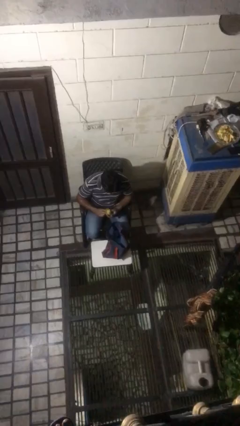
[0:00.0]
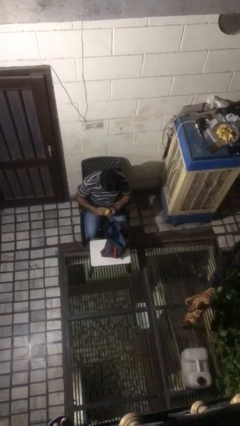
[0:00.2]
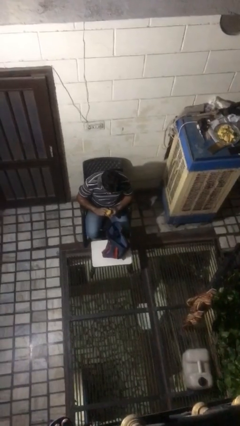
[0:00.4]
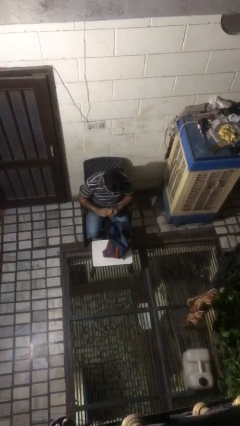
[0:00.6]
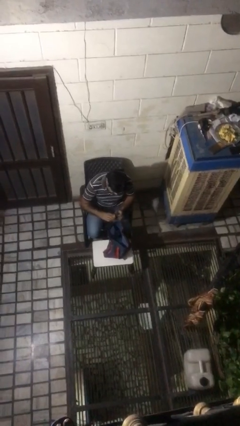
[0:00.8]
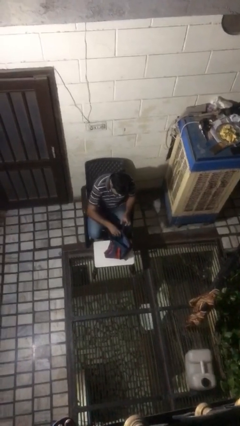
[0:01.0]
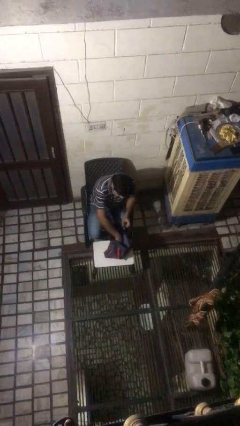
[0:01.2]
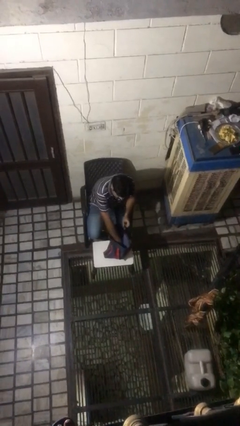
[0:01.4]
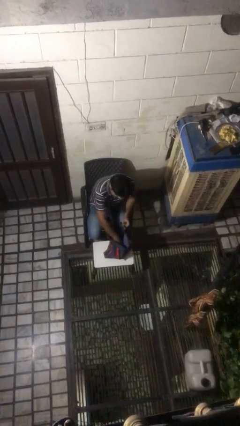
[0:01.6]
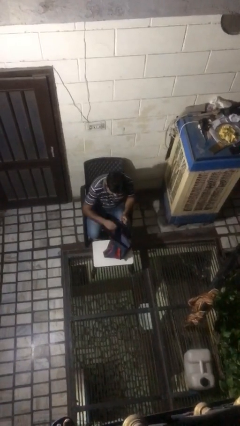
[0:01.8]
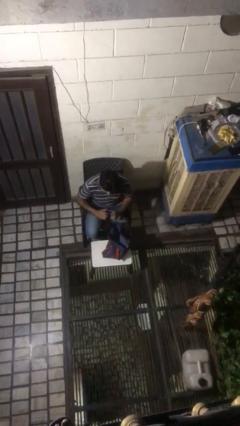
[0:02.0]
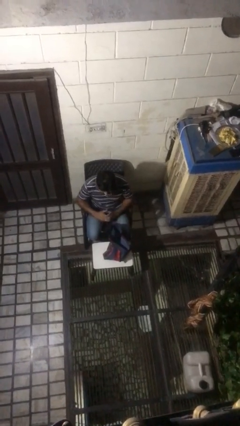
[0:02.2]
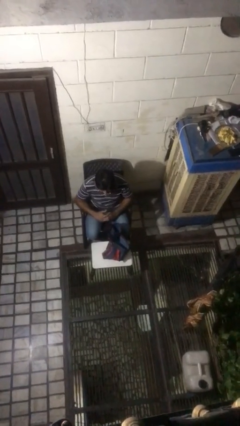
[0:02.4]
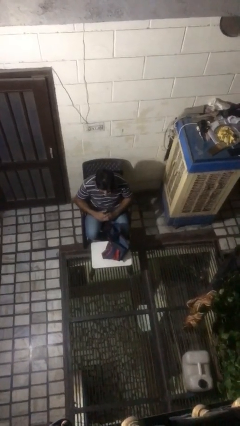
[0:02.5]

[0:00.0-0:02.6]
person puts object into bag

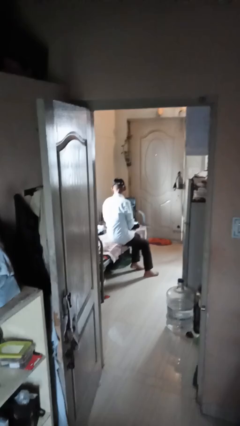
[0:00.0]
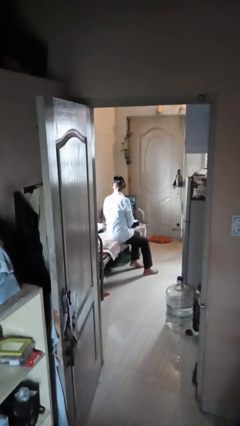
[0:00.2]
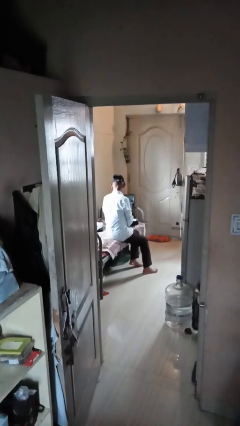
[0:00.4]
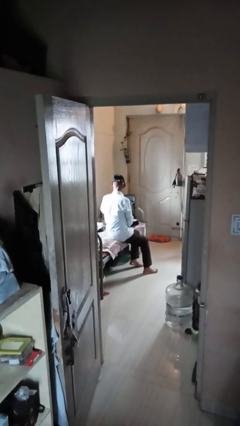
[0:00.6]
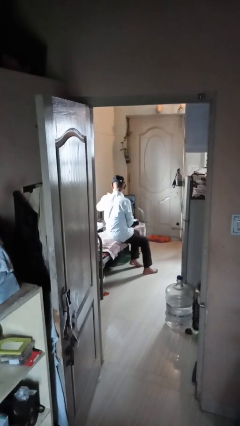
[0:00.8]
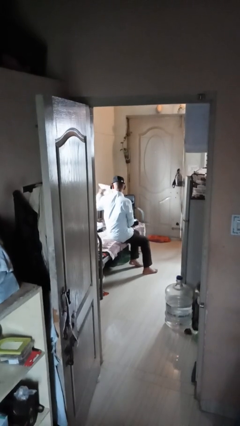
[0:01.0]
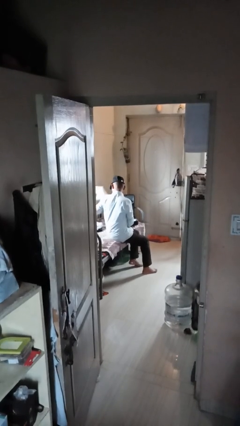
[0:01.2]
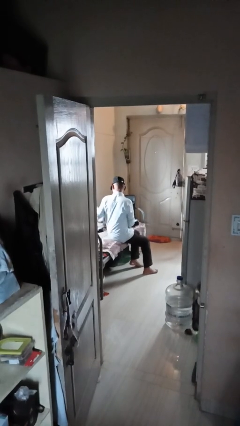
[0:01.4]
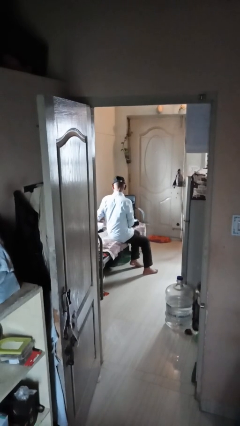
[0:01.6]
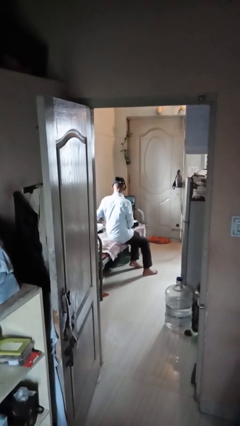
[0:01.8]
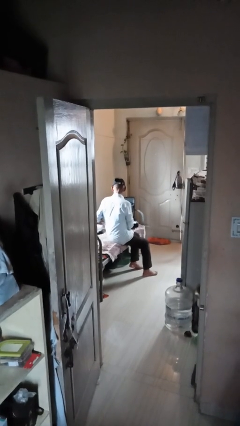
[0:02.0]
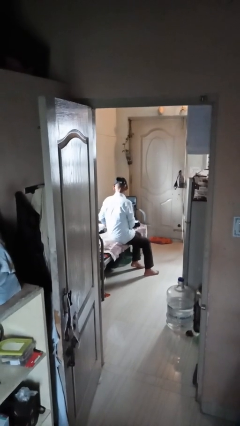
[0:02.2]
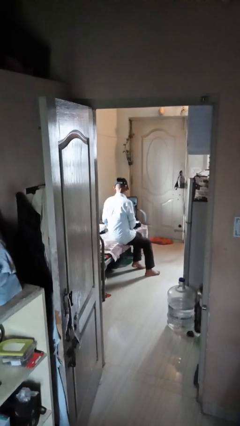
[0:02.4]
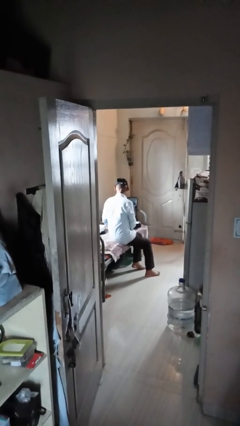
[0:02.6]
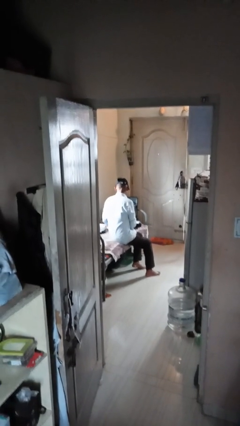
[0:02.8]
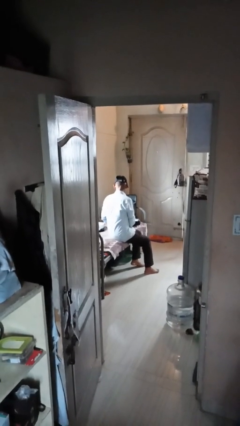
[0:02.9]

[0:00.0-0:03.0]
person unloads clothes from suitcase

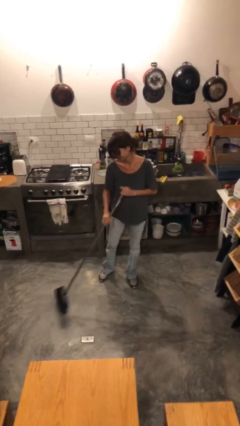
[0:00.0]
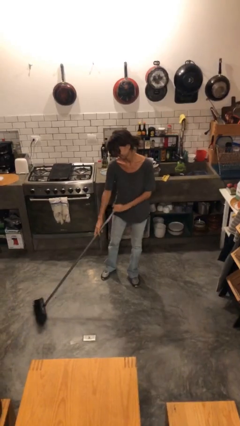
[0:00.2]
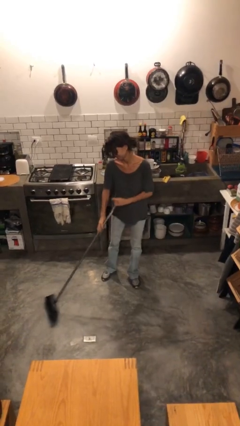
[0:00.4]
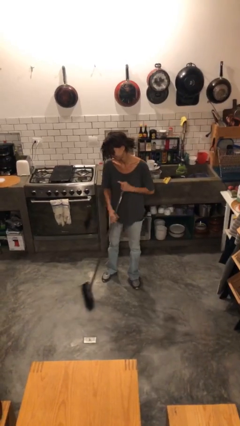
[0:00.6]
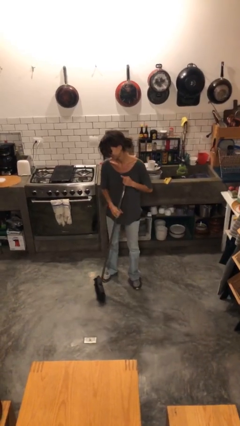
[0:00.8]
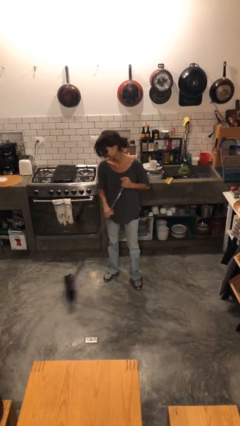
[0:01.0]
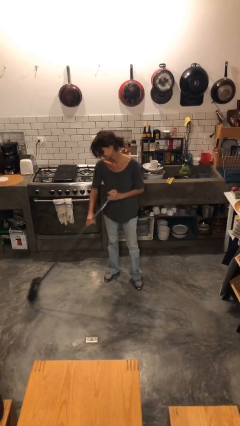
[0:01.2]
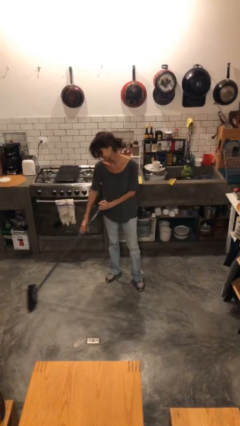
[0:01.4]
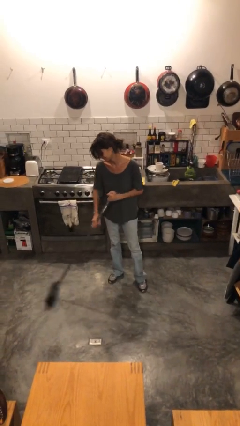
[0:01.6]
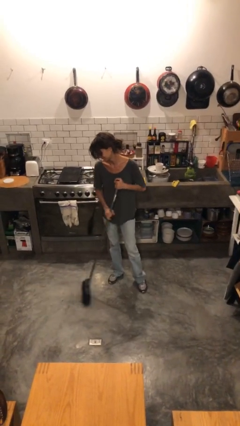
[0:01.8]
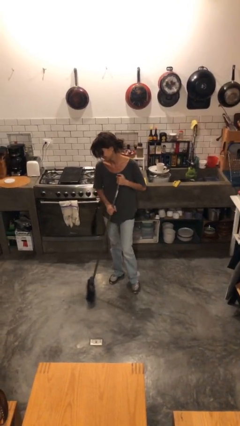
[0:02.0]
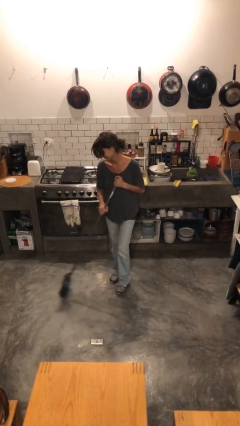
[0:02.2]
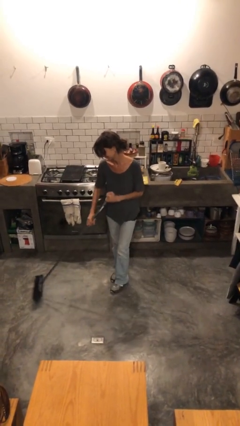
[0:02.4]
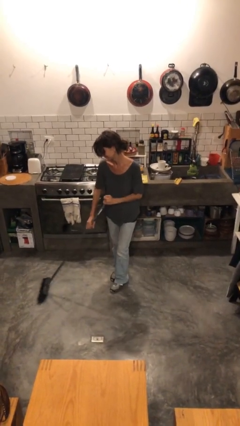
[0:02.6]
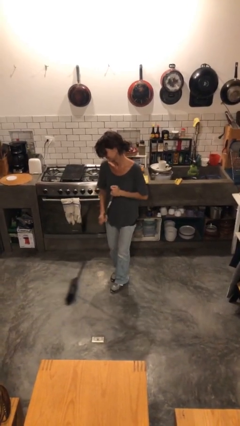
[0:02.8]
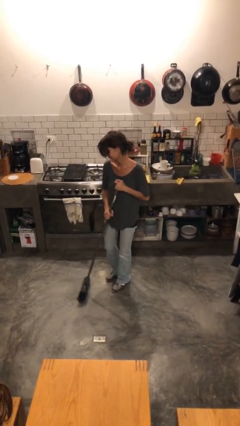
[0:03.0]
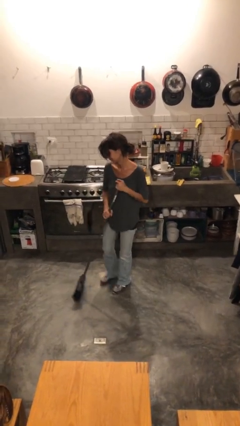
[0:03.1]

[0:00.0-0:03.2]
person sweeps floor

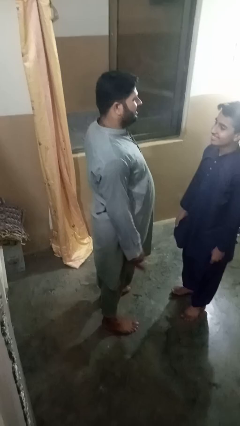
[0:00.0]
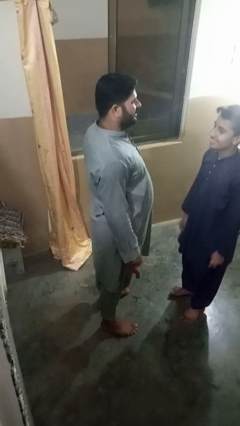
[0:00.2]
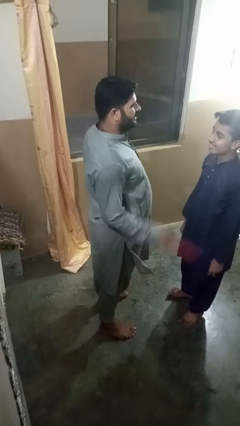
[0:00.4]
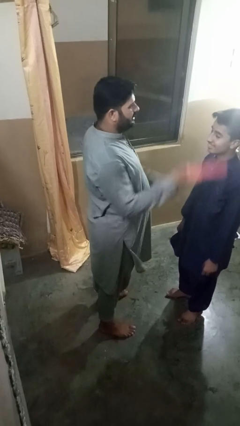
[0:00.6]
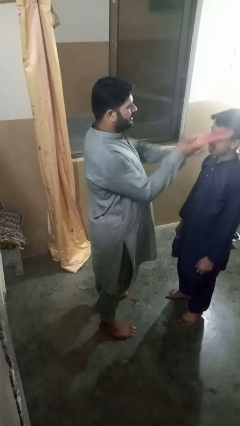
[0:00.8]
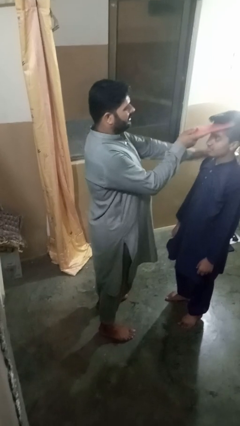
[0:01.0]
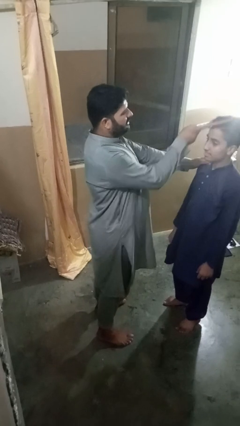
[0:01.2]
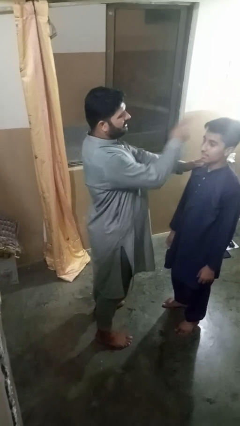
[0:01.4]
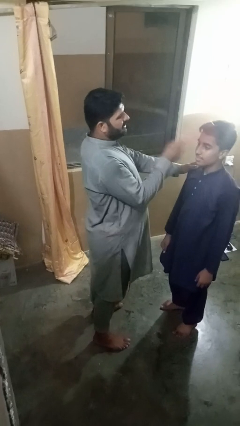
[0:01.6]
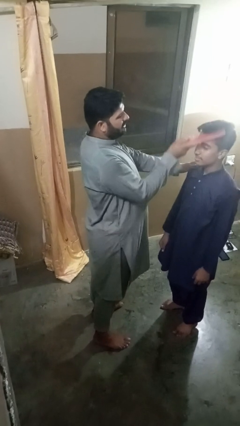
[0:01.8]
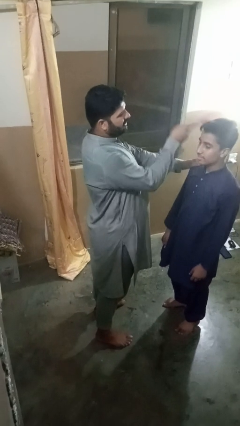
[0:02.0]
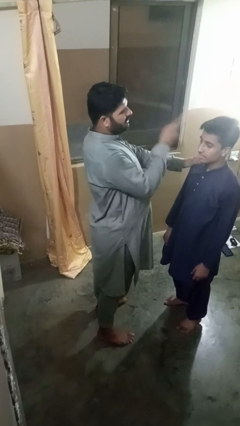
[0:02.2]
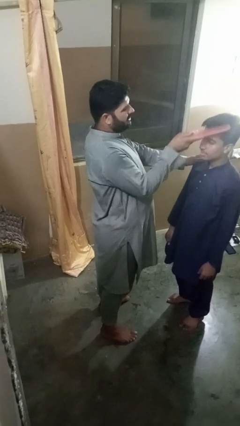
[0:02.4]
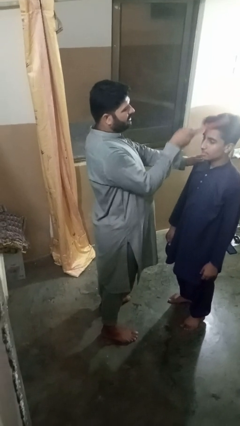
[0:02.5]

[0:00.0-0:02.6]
person brushes hair of person

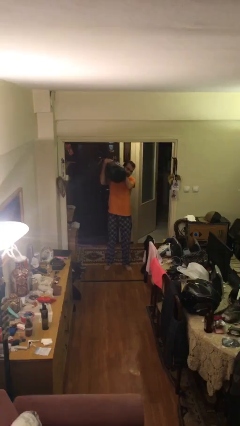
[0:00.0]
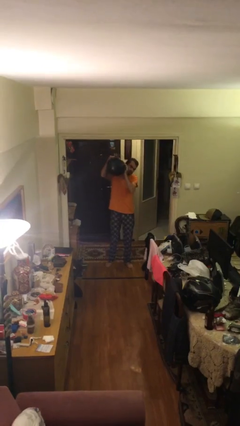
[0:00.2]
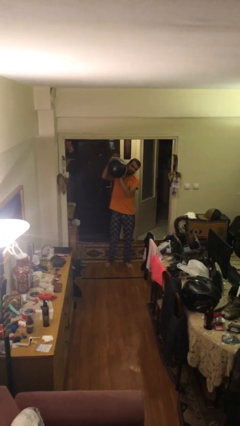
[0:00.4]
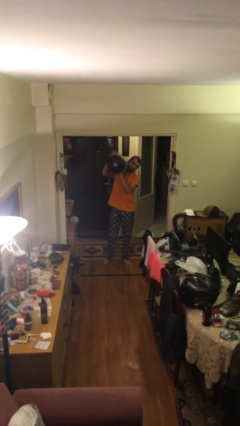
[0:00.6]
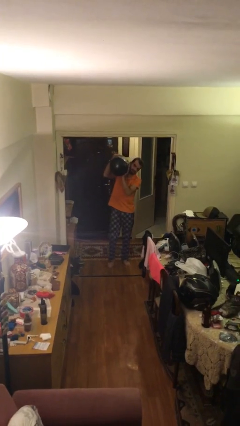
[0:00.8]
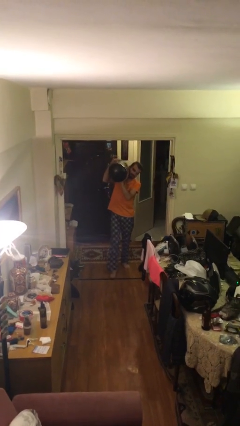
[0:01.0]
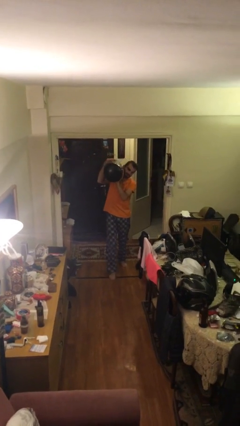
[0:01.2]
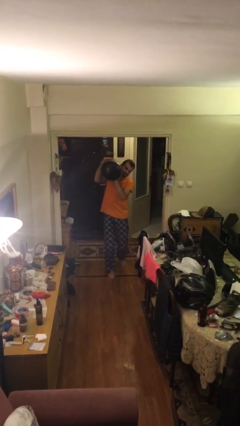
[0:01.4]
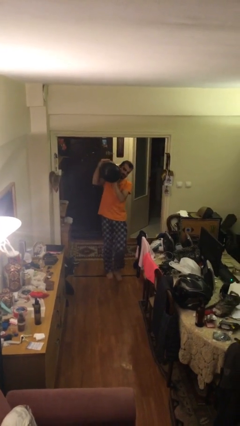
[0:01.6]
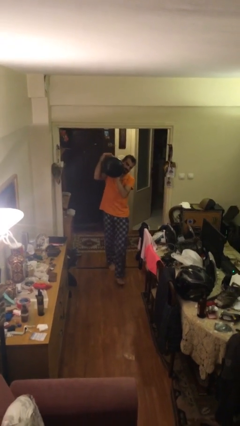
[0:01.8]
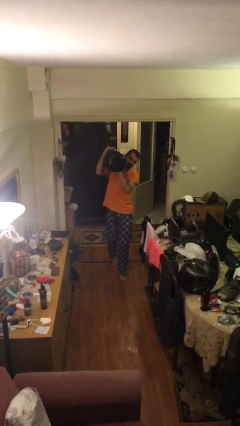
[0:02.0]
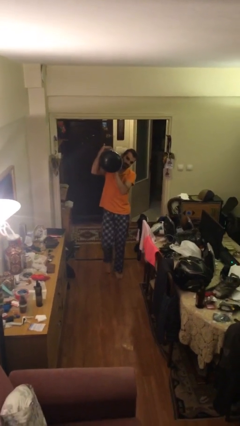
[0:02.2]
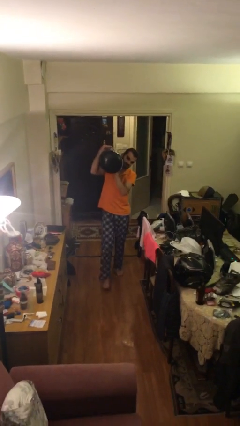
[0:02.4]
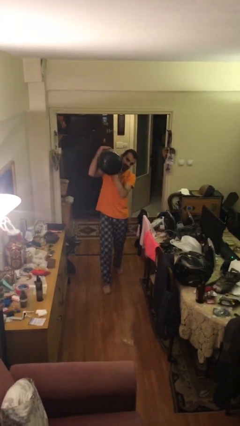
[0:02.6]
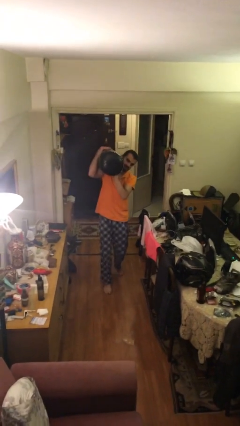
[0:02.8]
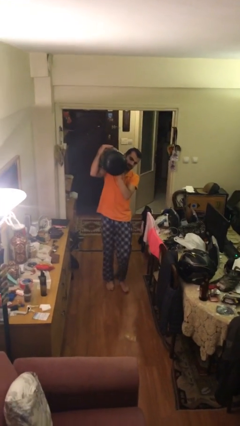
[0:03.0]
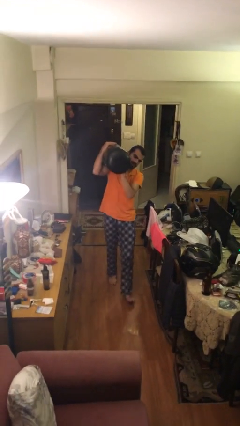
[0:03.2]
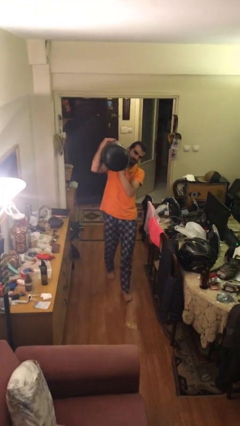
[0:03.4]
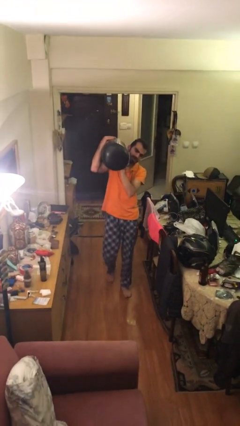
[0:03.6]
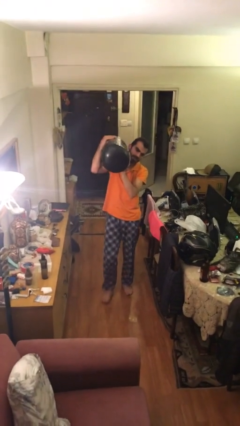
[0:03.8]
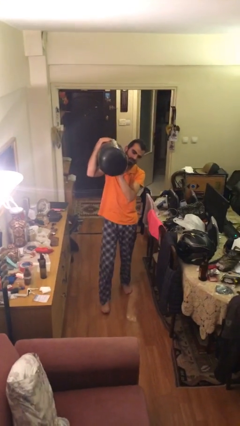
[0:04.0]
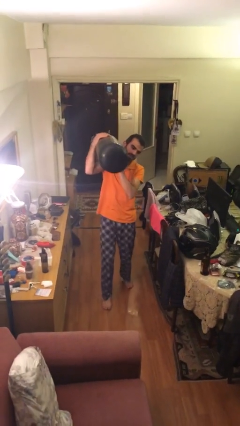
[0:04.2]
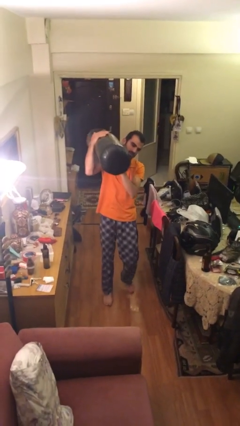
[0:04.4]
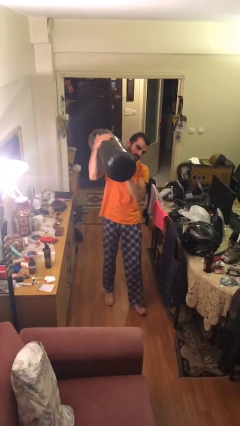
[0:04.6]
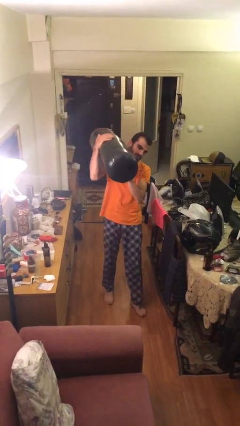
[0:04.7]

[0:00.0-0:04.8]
person carries heavy object

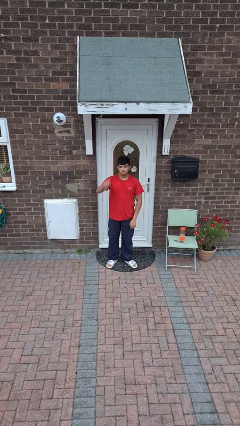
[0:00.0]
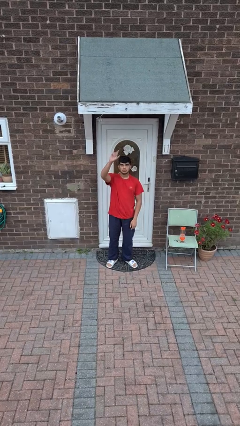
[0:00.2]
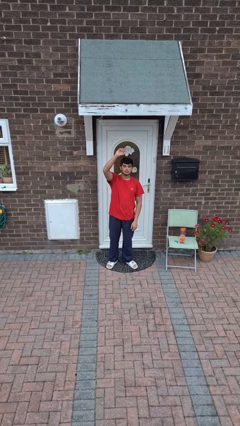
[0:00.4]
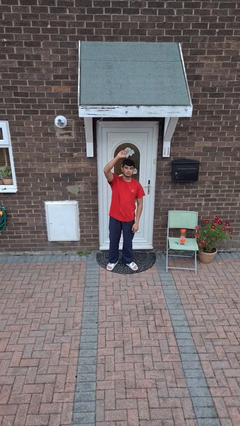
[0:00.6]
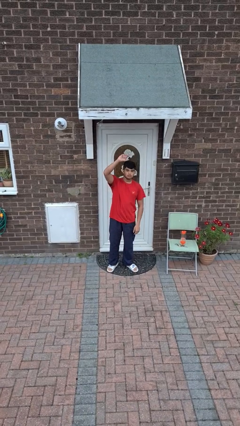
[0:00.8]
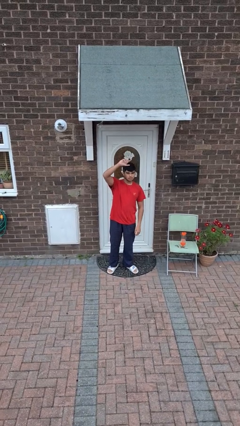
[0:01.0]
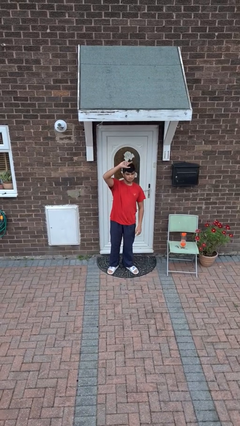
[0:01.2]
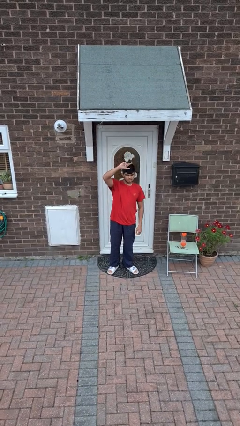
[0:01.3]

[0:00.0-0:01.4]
person gestures raise hand
